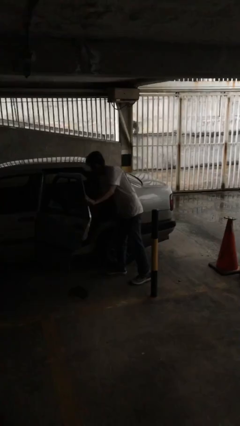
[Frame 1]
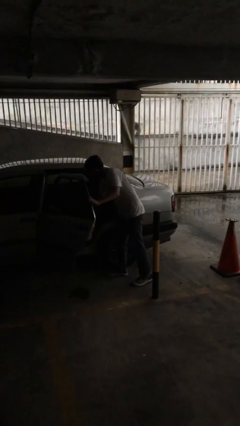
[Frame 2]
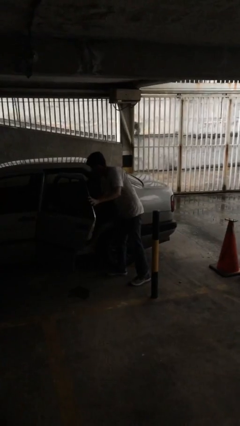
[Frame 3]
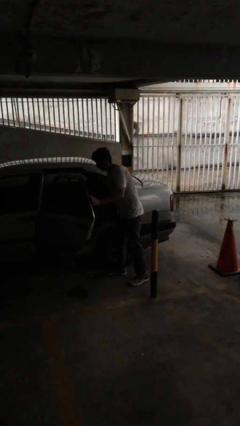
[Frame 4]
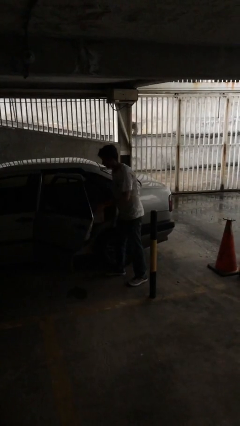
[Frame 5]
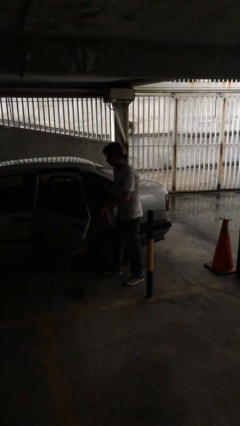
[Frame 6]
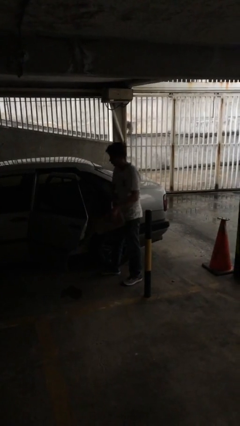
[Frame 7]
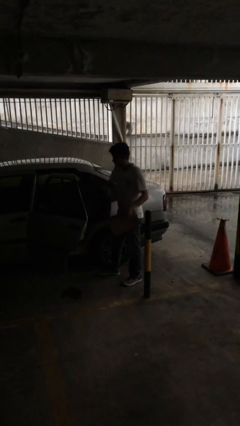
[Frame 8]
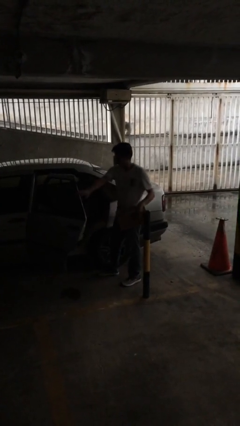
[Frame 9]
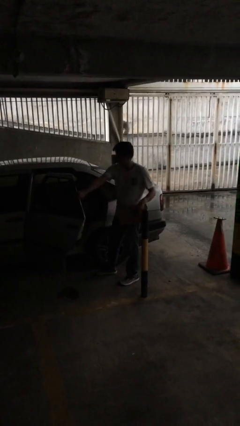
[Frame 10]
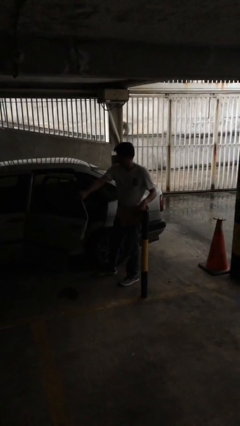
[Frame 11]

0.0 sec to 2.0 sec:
person unloads car

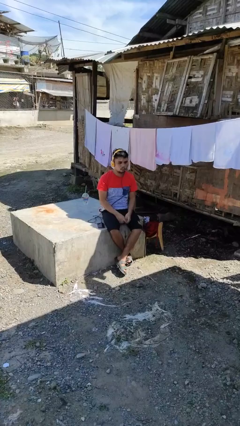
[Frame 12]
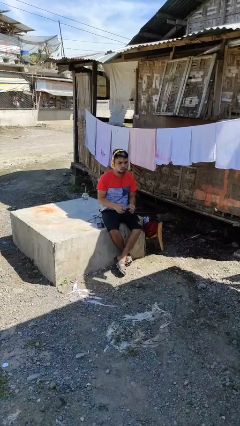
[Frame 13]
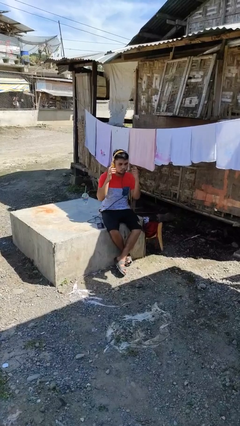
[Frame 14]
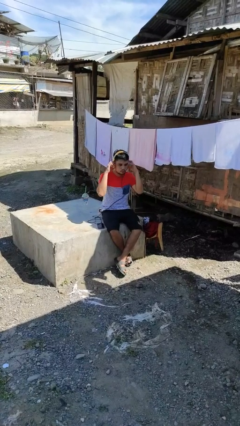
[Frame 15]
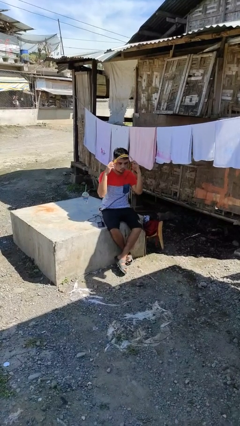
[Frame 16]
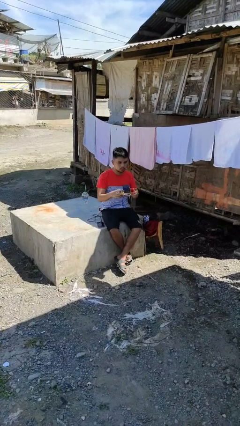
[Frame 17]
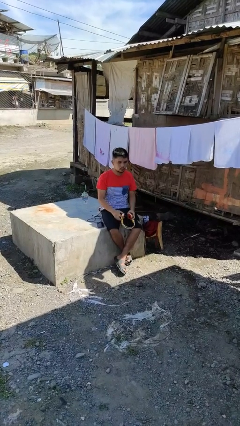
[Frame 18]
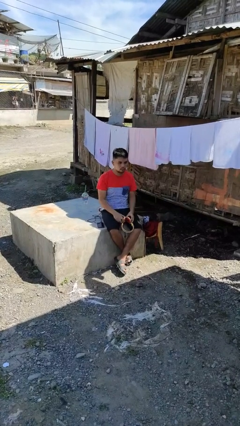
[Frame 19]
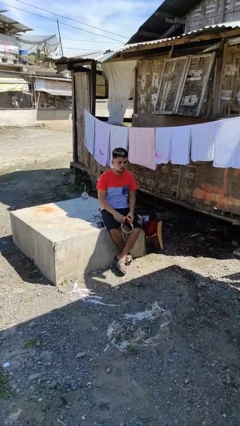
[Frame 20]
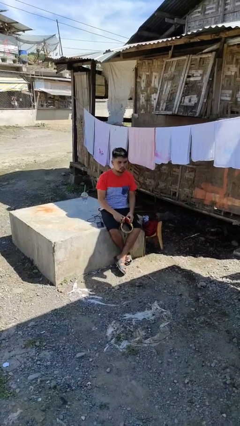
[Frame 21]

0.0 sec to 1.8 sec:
person takes off headphones

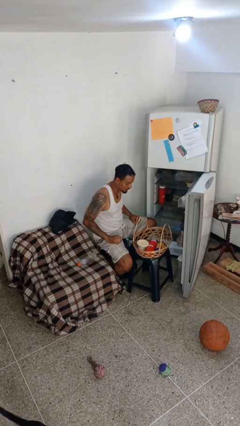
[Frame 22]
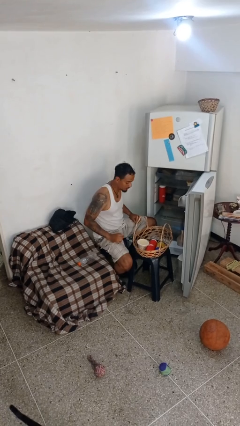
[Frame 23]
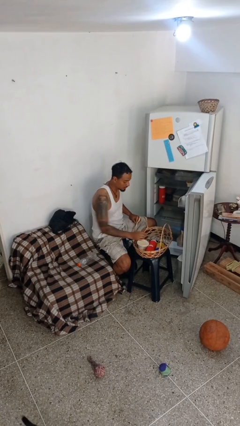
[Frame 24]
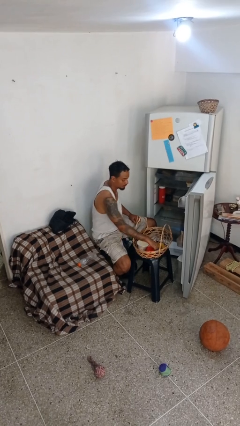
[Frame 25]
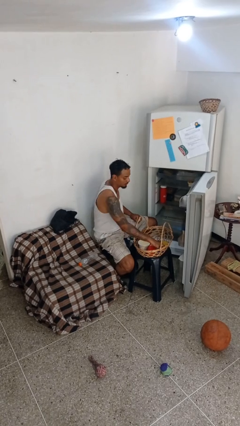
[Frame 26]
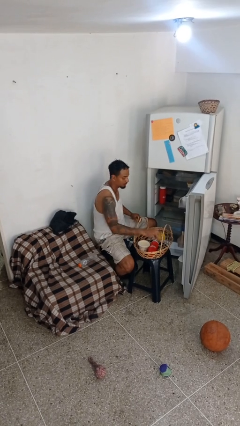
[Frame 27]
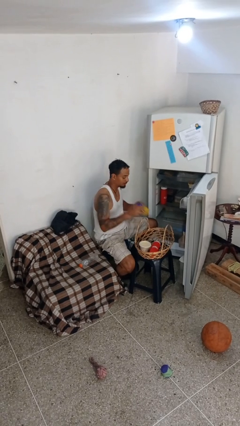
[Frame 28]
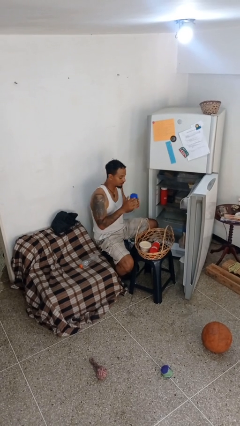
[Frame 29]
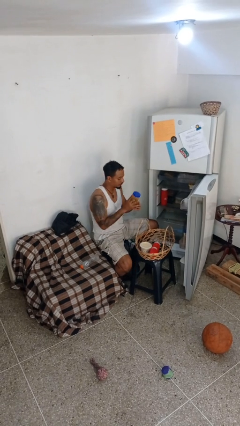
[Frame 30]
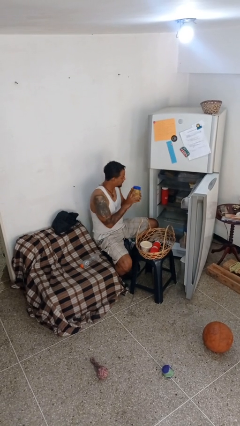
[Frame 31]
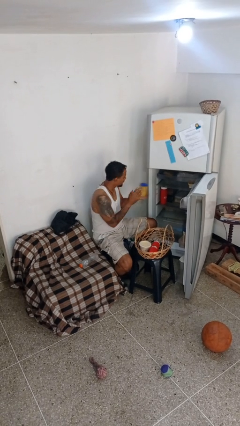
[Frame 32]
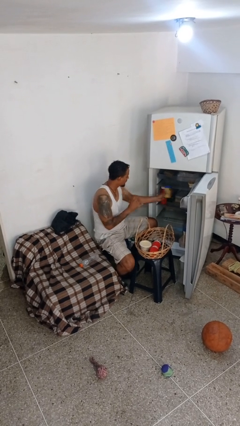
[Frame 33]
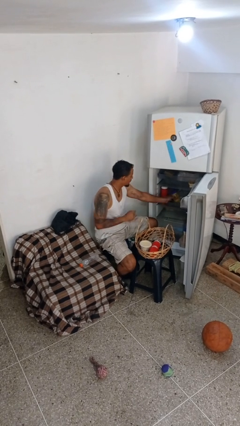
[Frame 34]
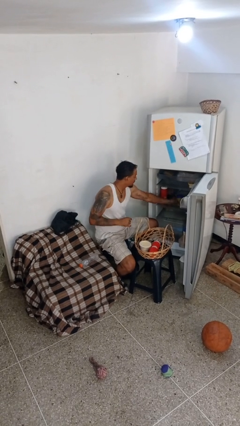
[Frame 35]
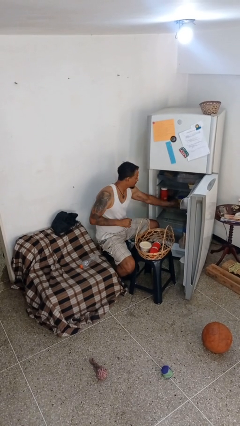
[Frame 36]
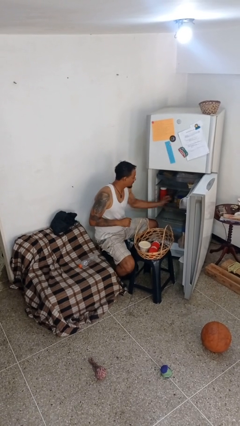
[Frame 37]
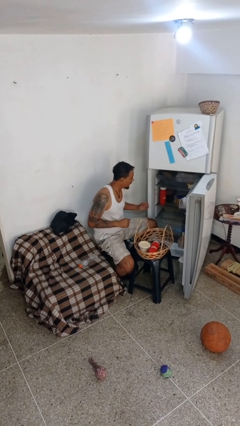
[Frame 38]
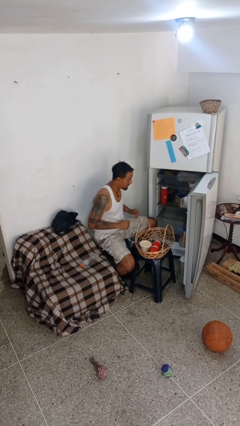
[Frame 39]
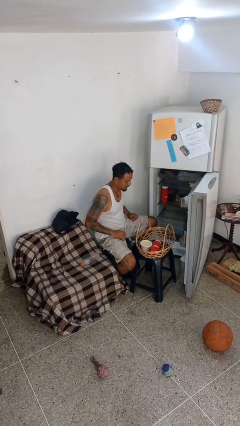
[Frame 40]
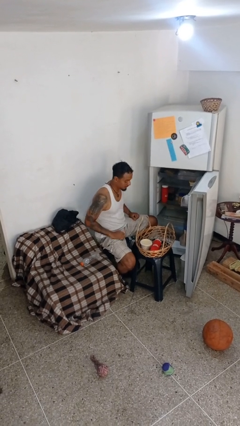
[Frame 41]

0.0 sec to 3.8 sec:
person loads groceries into refrigerator

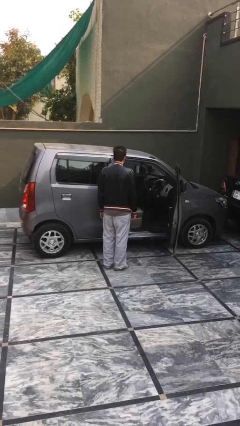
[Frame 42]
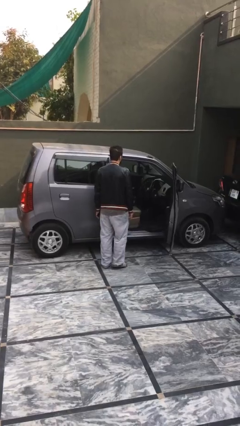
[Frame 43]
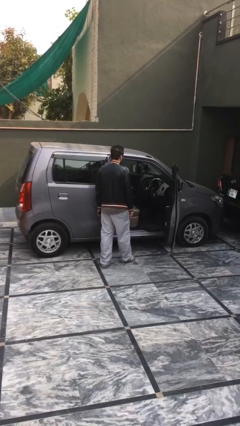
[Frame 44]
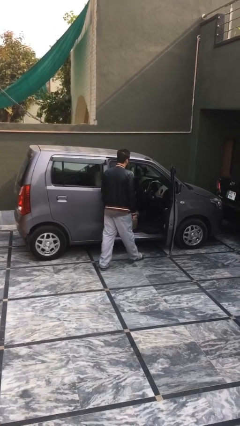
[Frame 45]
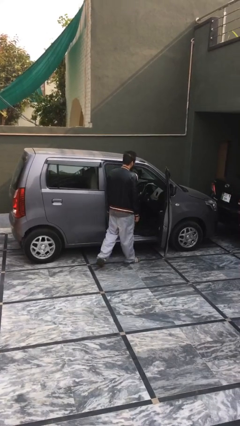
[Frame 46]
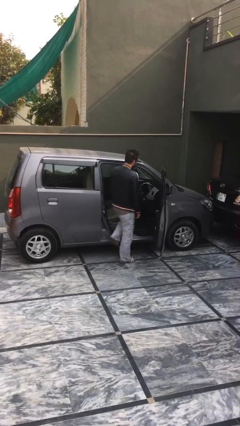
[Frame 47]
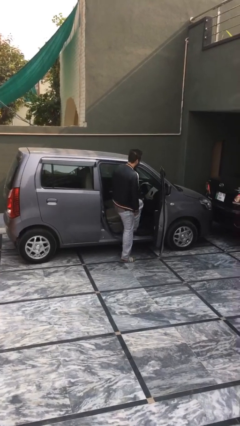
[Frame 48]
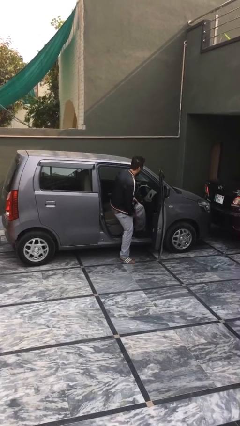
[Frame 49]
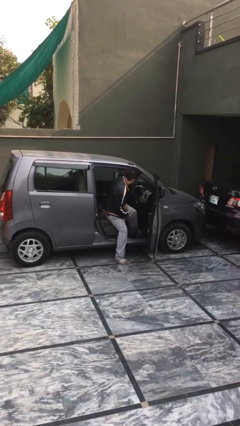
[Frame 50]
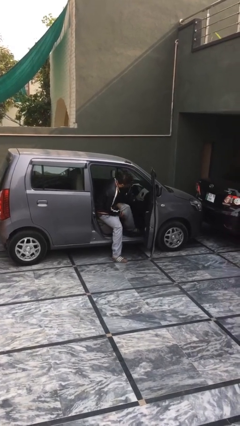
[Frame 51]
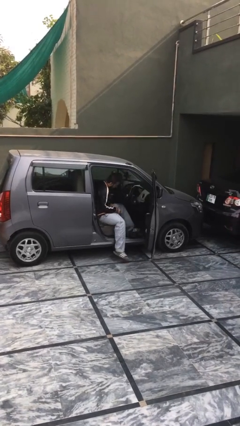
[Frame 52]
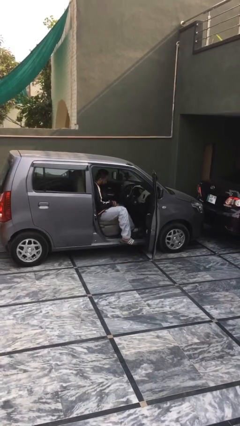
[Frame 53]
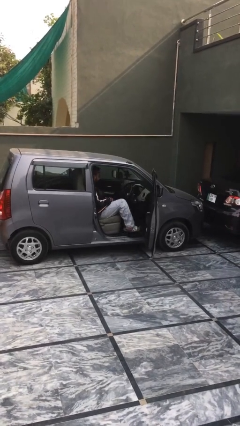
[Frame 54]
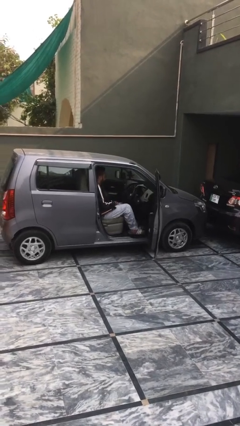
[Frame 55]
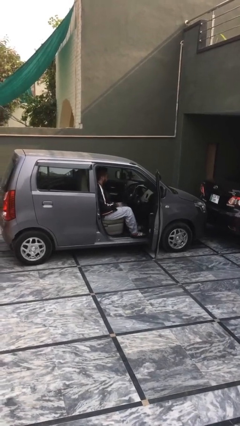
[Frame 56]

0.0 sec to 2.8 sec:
person enters car

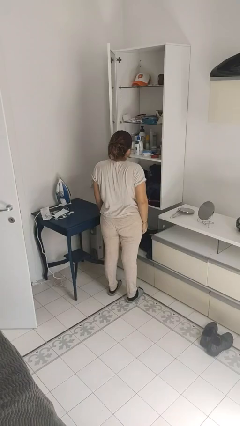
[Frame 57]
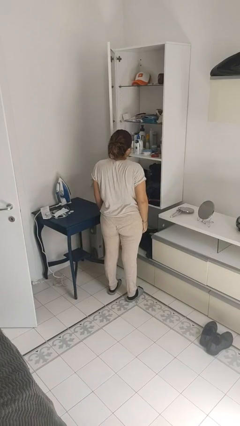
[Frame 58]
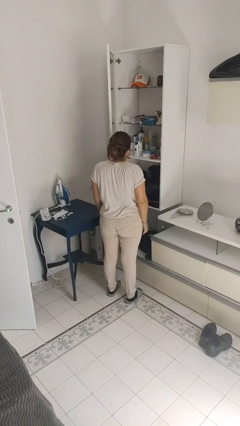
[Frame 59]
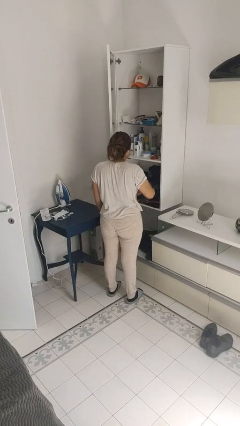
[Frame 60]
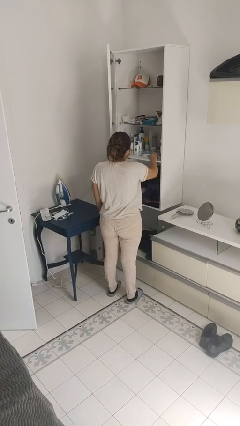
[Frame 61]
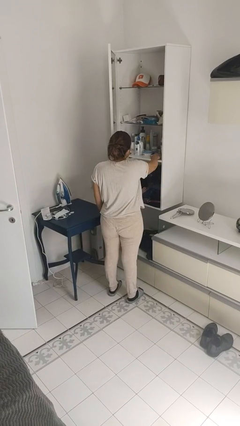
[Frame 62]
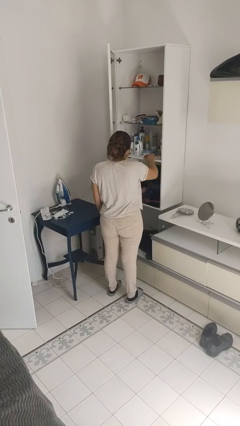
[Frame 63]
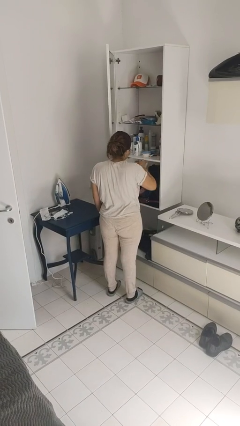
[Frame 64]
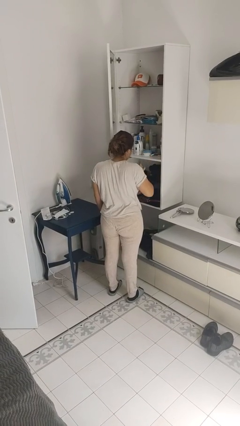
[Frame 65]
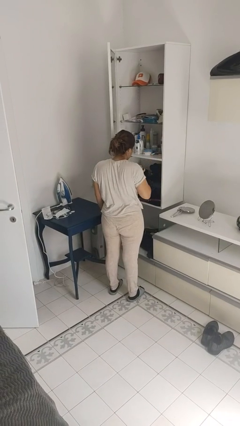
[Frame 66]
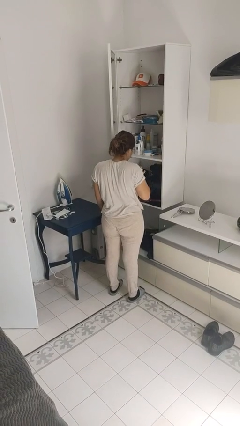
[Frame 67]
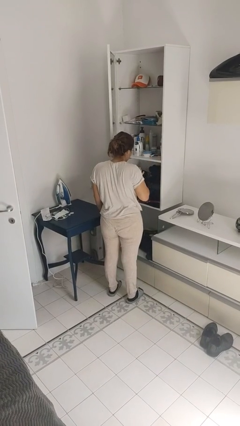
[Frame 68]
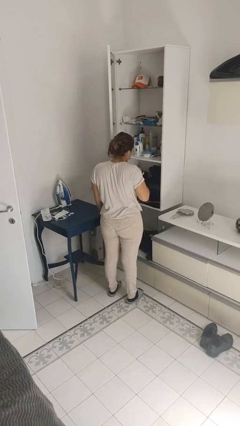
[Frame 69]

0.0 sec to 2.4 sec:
person picks up object from shelf

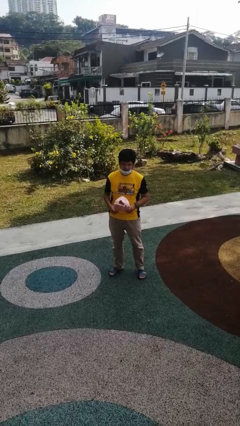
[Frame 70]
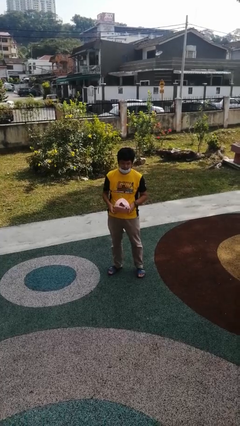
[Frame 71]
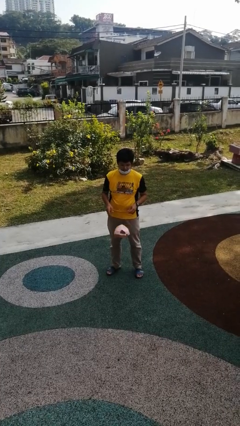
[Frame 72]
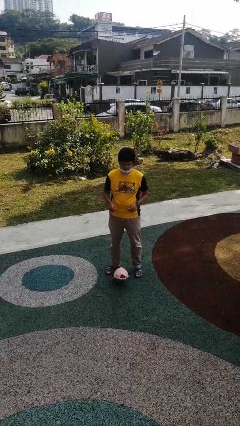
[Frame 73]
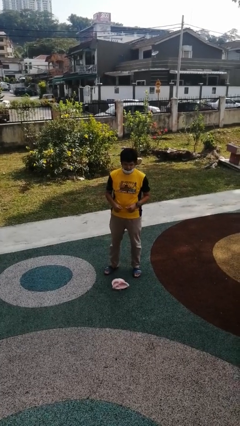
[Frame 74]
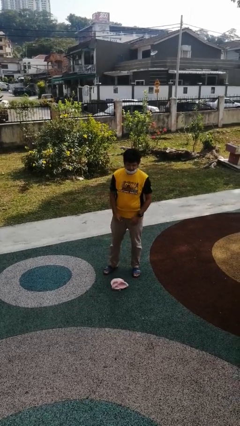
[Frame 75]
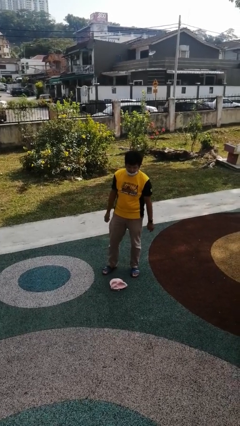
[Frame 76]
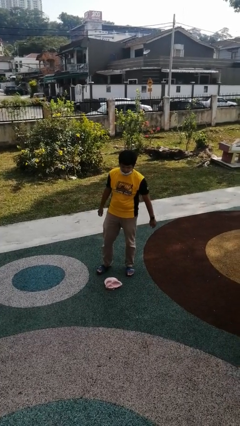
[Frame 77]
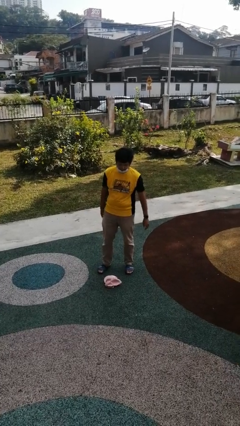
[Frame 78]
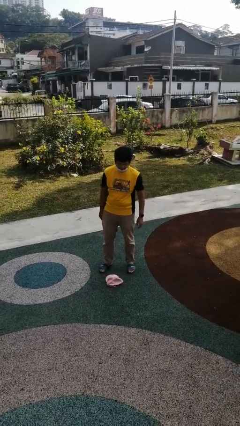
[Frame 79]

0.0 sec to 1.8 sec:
person drops object

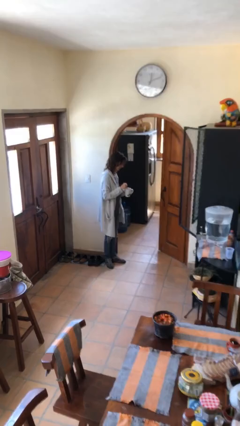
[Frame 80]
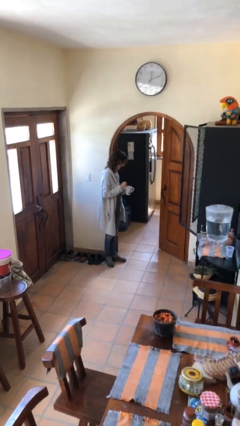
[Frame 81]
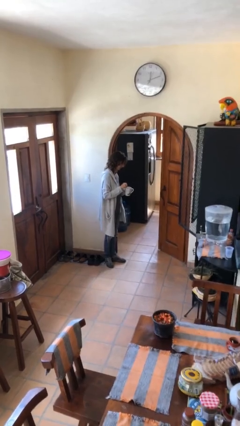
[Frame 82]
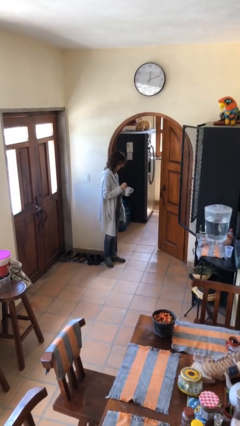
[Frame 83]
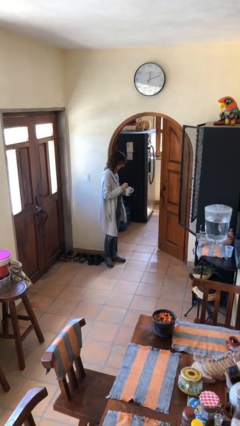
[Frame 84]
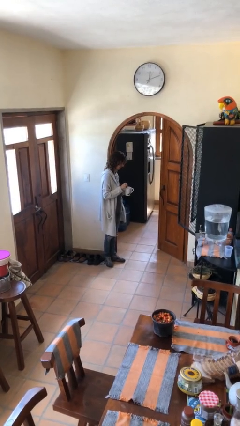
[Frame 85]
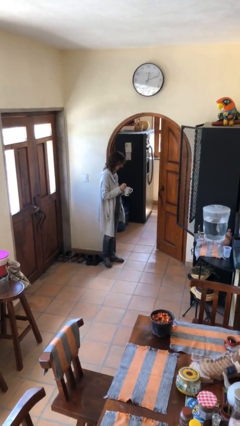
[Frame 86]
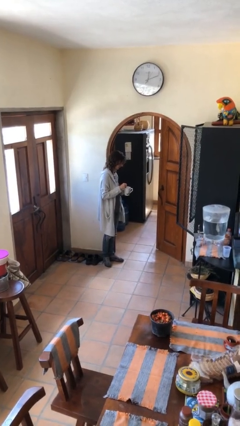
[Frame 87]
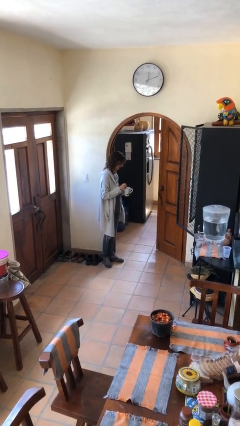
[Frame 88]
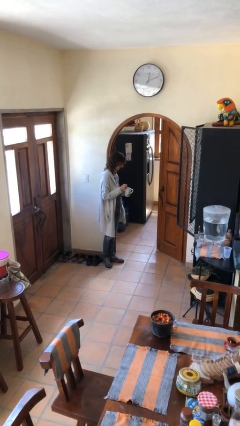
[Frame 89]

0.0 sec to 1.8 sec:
person stirs mug

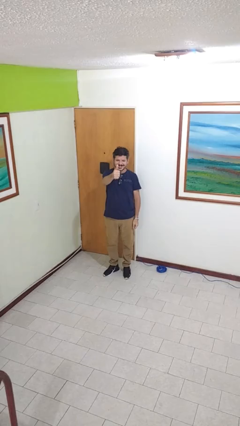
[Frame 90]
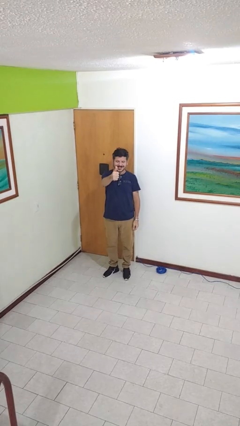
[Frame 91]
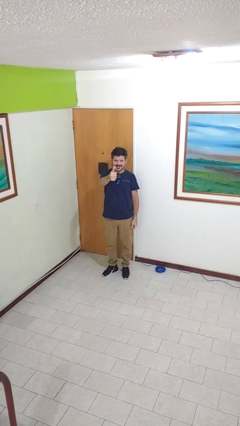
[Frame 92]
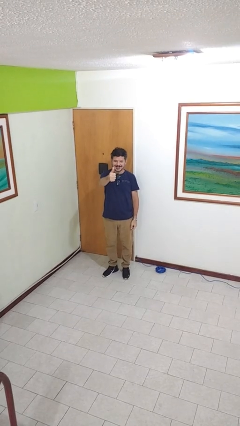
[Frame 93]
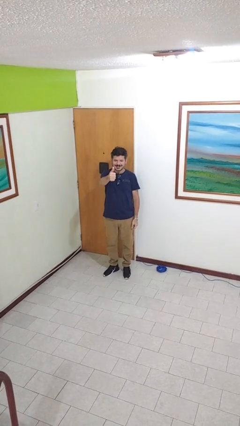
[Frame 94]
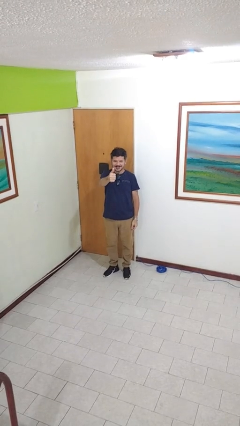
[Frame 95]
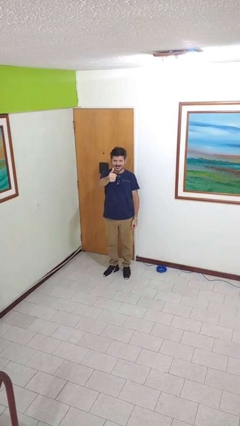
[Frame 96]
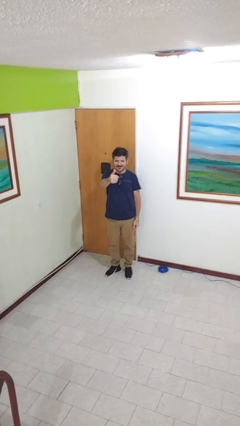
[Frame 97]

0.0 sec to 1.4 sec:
person gestures thumbs up
